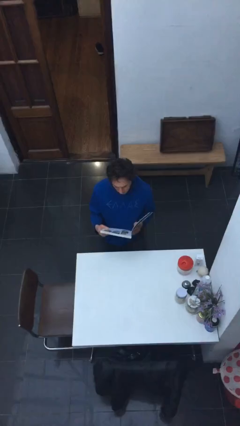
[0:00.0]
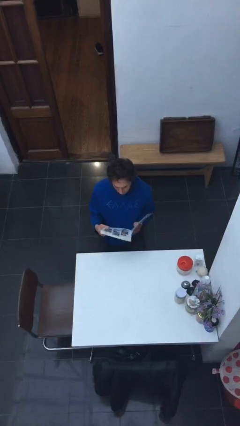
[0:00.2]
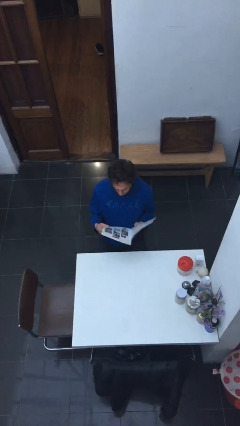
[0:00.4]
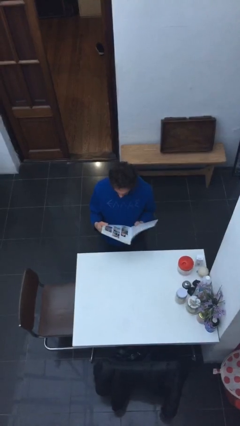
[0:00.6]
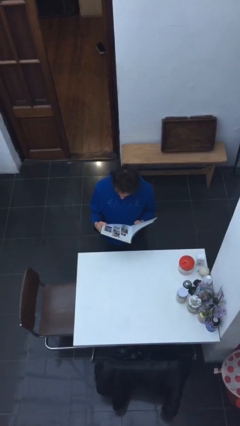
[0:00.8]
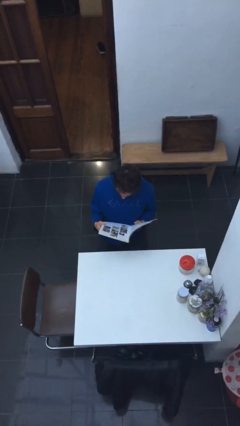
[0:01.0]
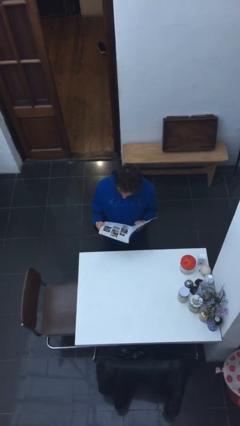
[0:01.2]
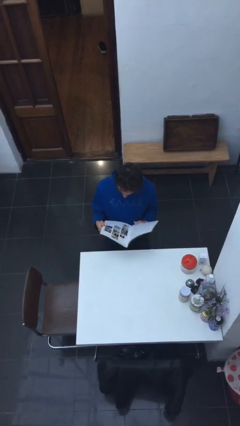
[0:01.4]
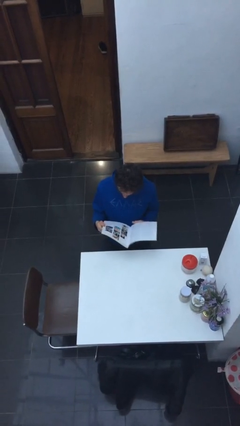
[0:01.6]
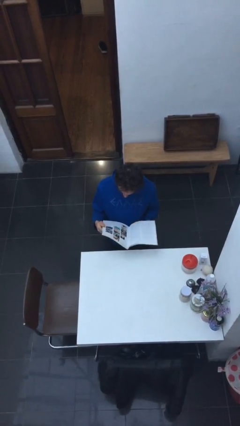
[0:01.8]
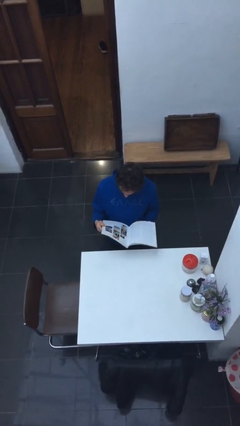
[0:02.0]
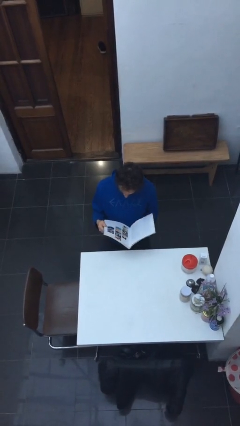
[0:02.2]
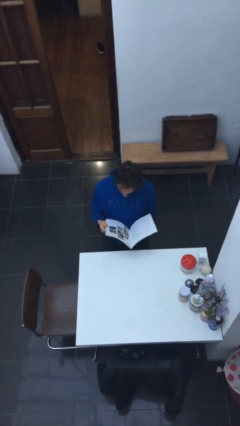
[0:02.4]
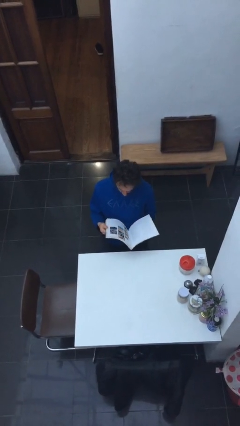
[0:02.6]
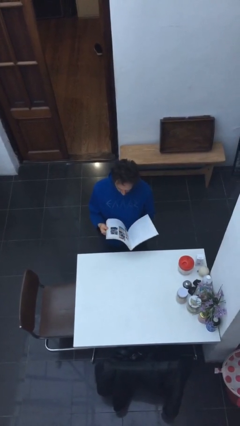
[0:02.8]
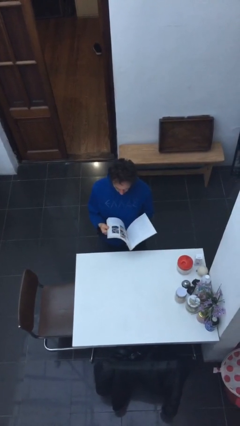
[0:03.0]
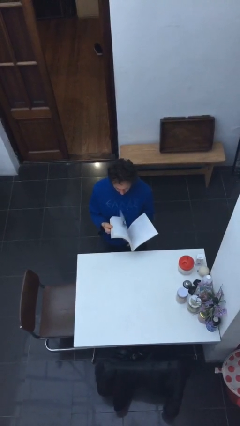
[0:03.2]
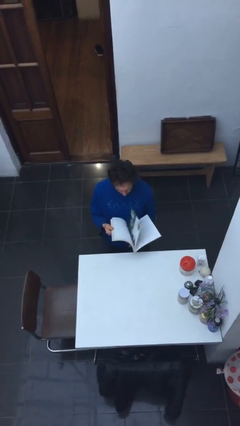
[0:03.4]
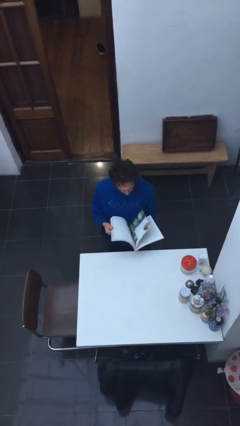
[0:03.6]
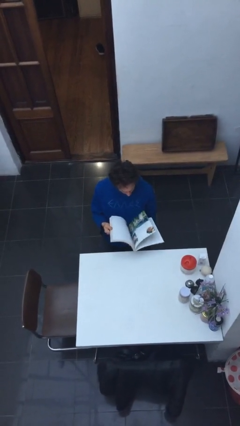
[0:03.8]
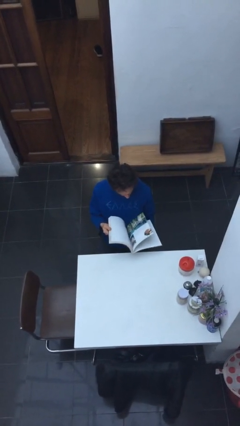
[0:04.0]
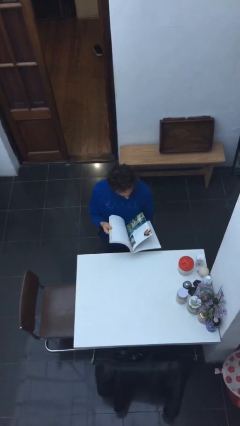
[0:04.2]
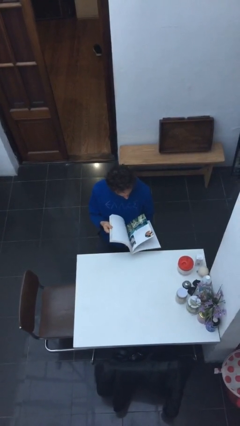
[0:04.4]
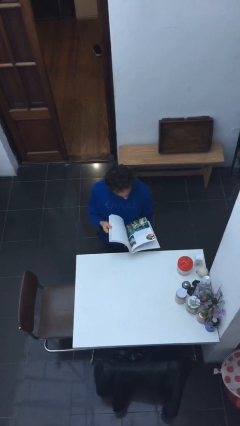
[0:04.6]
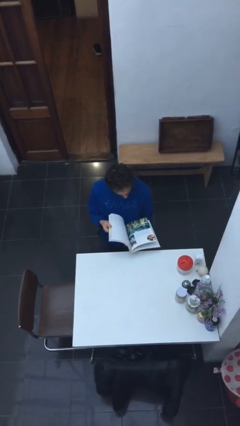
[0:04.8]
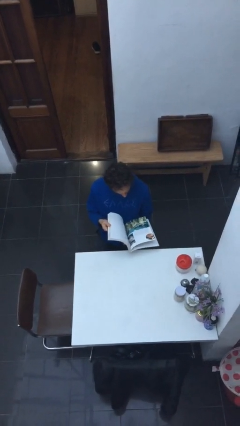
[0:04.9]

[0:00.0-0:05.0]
person reads document

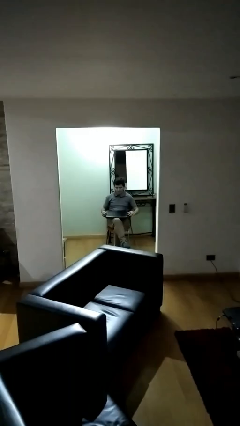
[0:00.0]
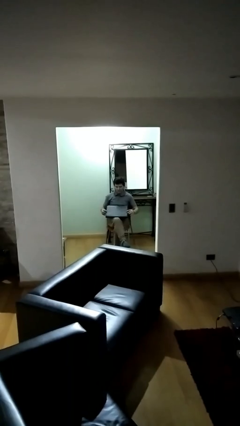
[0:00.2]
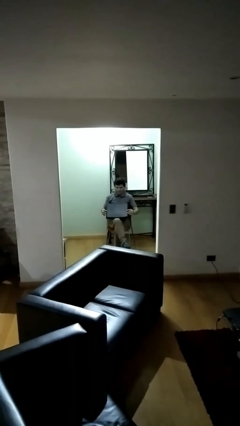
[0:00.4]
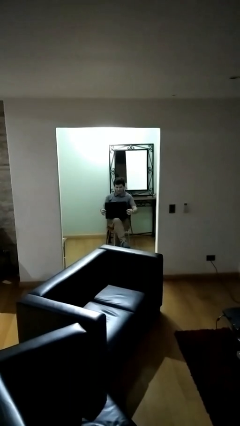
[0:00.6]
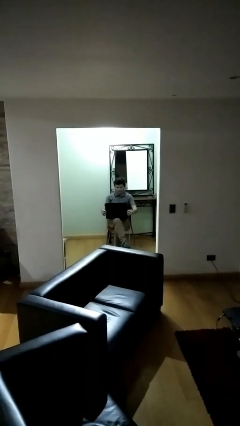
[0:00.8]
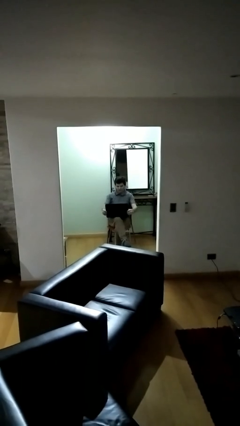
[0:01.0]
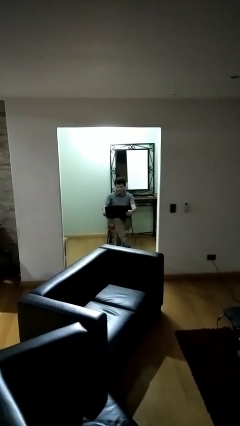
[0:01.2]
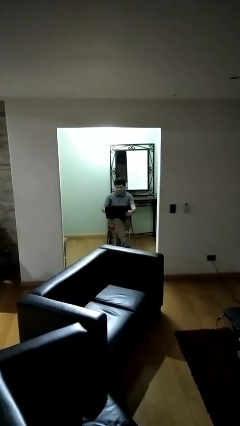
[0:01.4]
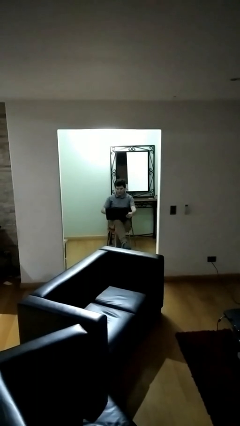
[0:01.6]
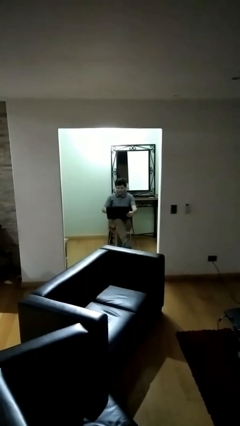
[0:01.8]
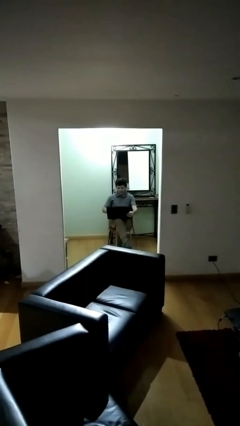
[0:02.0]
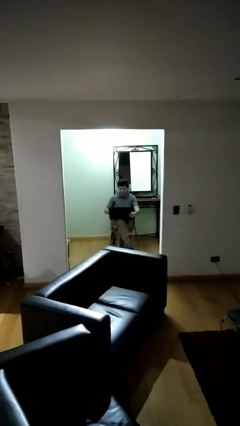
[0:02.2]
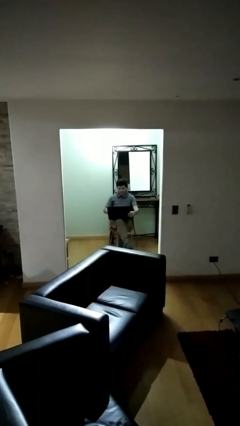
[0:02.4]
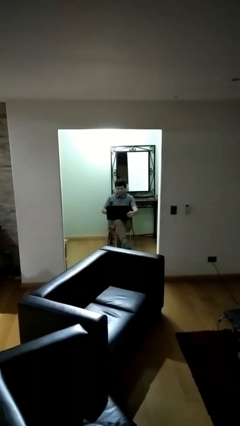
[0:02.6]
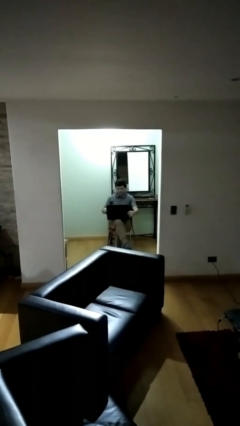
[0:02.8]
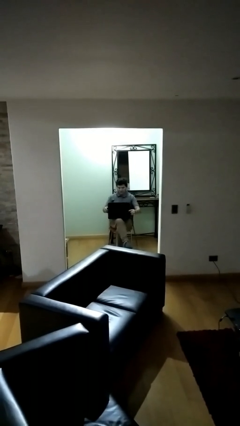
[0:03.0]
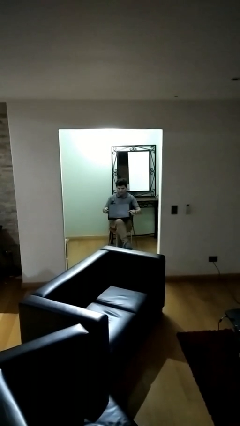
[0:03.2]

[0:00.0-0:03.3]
person interacts with laptop

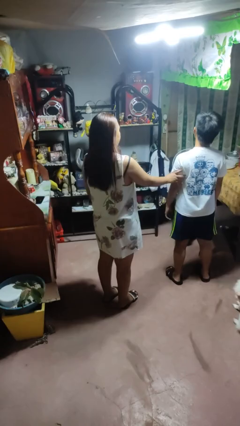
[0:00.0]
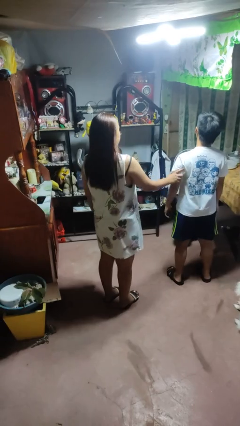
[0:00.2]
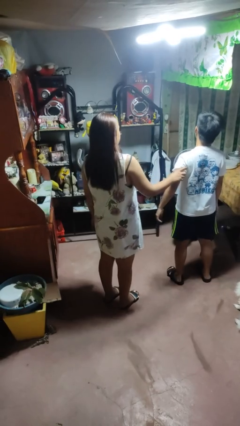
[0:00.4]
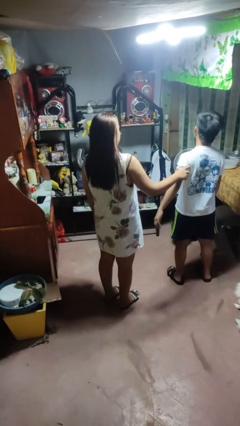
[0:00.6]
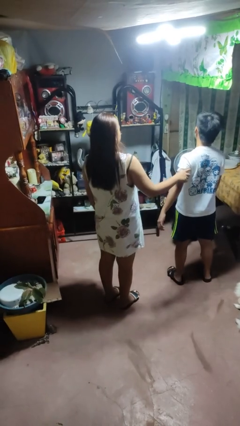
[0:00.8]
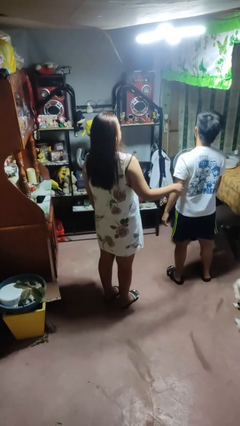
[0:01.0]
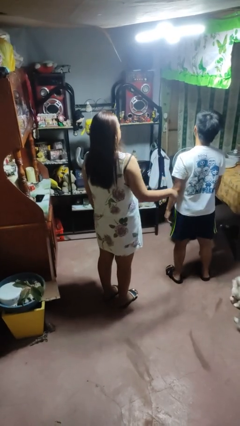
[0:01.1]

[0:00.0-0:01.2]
person grabs person by bicep

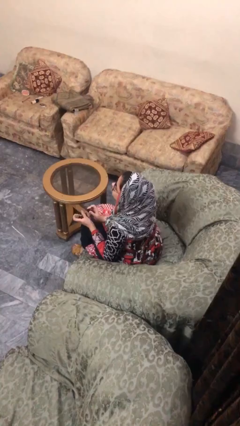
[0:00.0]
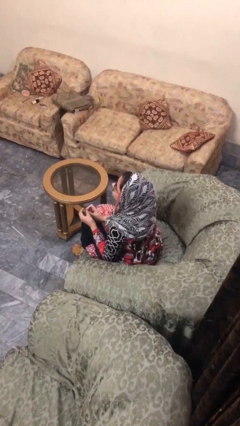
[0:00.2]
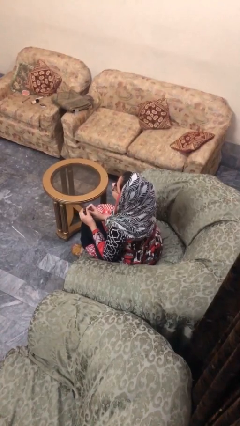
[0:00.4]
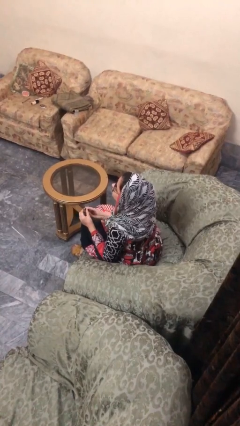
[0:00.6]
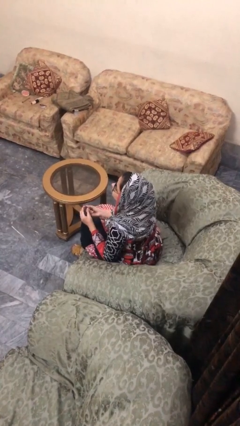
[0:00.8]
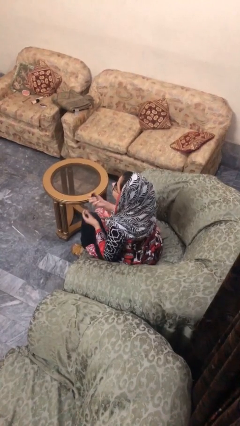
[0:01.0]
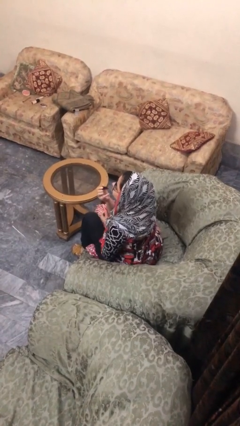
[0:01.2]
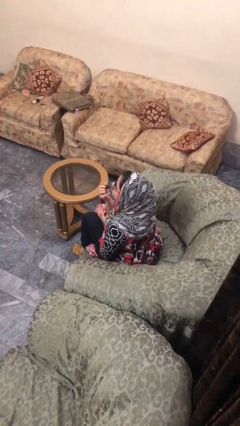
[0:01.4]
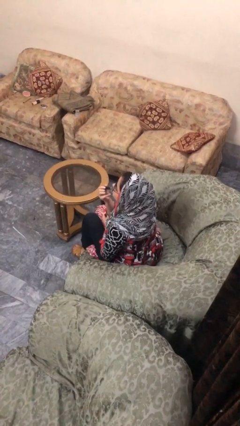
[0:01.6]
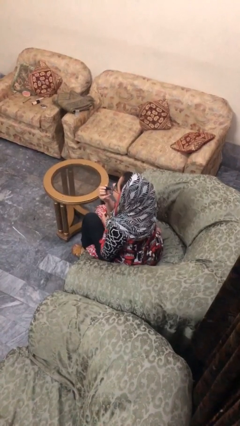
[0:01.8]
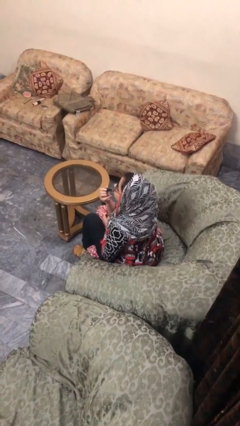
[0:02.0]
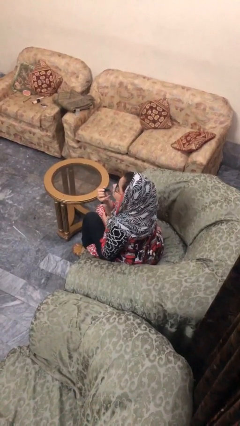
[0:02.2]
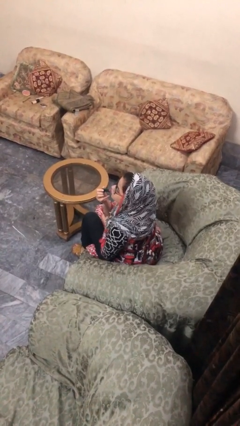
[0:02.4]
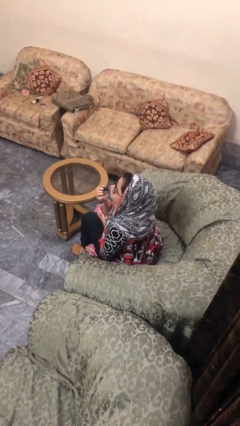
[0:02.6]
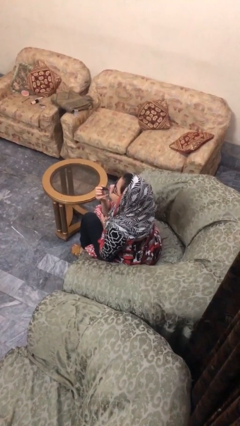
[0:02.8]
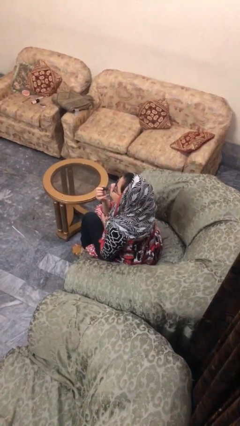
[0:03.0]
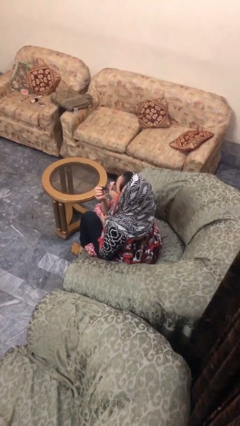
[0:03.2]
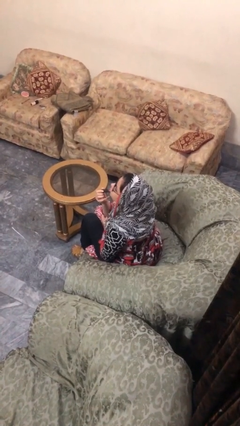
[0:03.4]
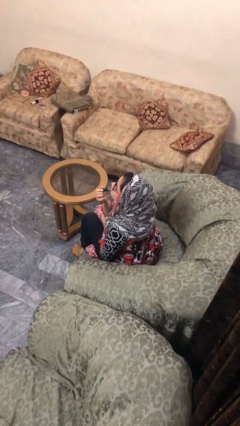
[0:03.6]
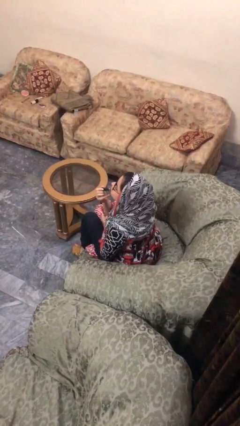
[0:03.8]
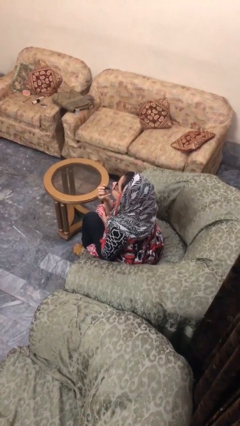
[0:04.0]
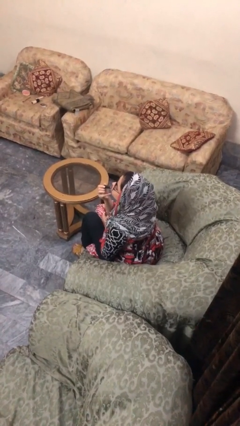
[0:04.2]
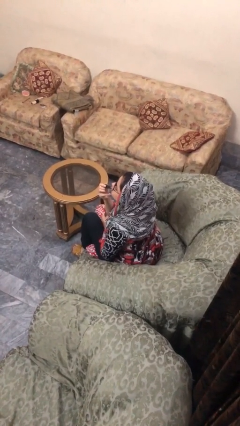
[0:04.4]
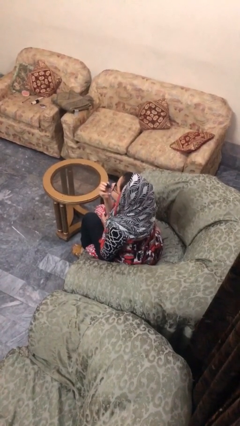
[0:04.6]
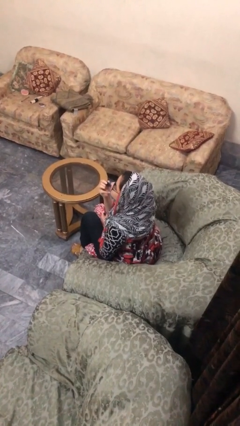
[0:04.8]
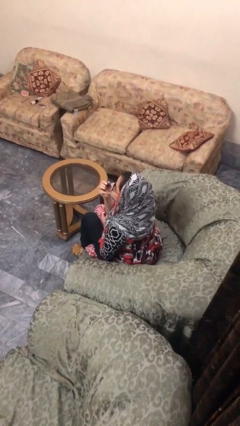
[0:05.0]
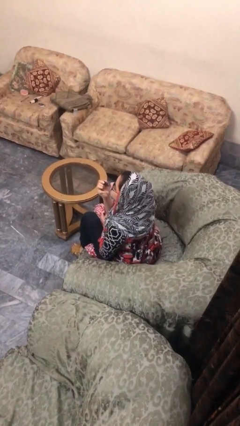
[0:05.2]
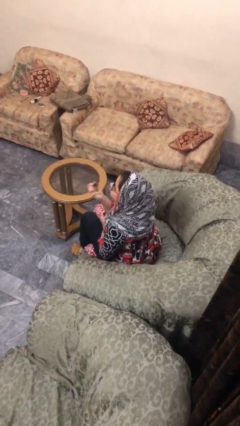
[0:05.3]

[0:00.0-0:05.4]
person applies lip makeup

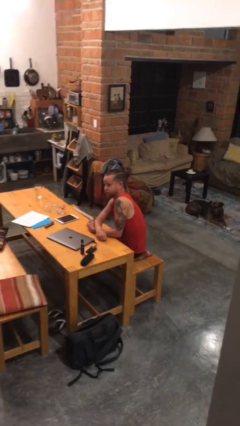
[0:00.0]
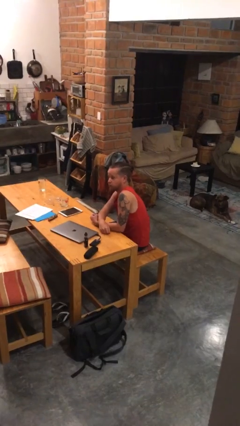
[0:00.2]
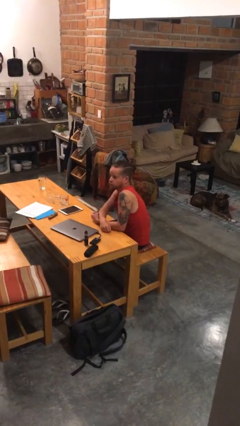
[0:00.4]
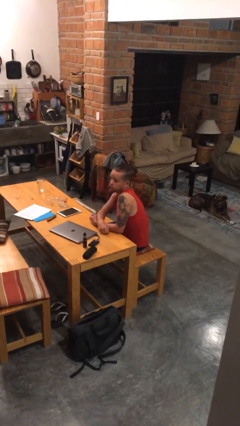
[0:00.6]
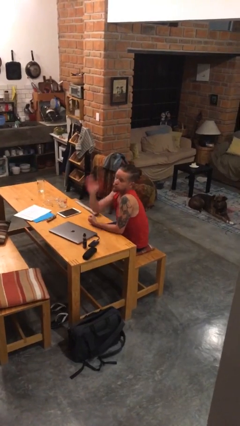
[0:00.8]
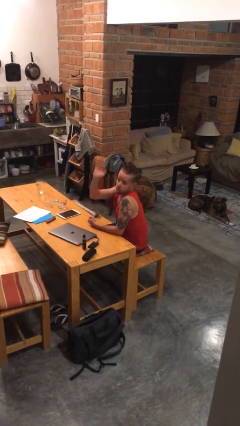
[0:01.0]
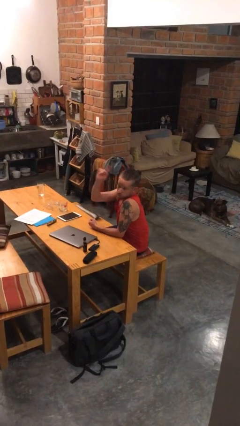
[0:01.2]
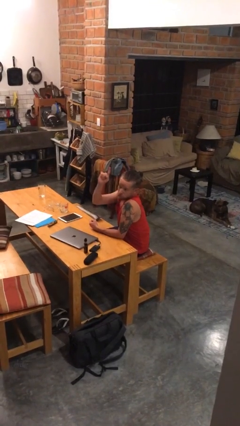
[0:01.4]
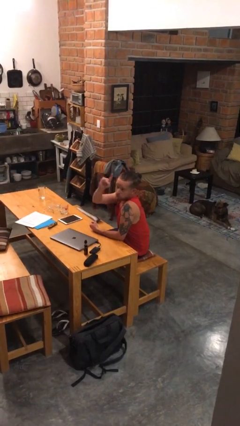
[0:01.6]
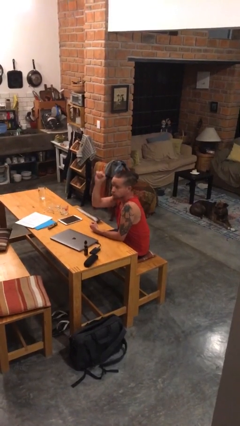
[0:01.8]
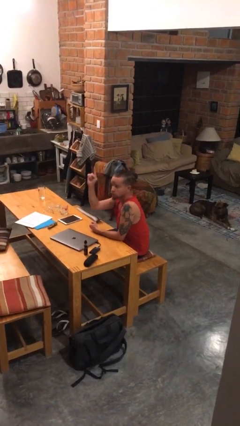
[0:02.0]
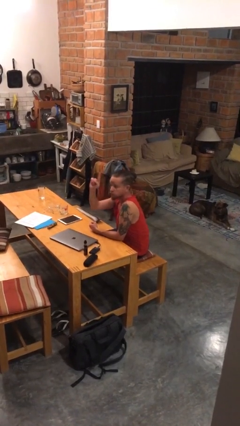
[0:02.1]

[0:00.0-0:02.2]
person gestures raise hand

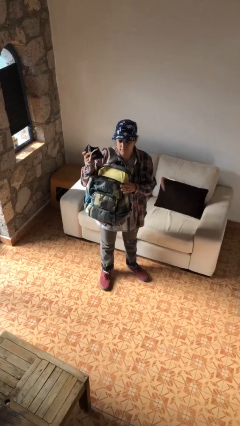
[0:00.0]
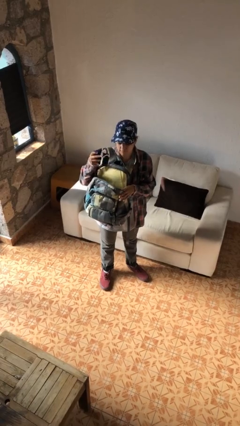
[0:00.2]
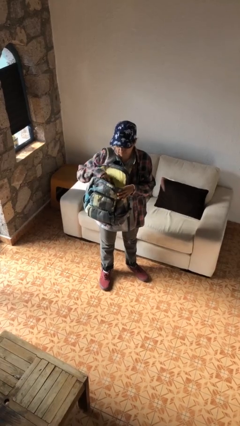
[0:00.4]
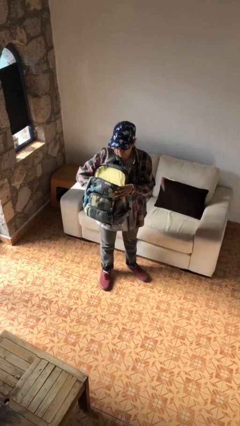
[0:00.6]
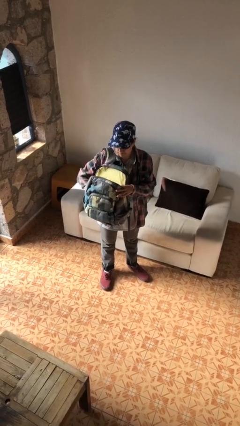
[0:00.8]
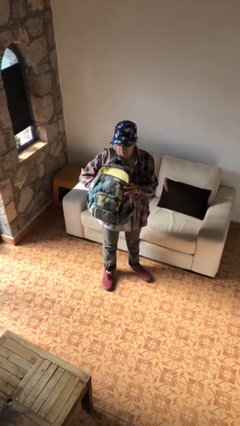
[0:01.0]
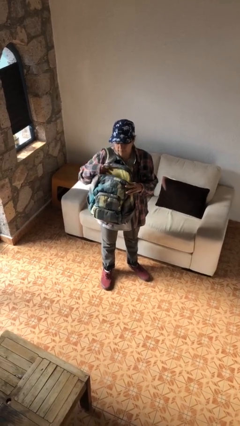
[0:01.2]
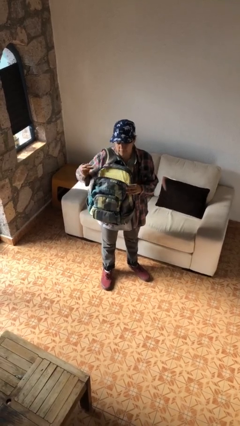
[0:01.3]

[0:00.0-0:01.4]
person puts object into backpack
